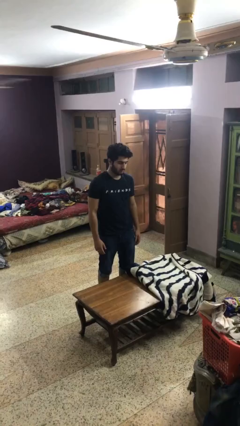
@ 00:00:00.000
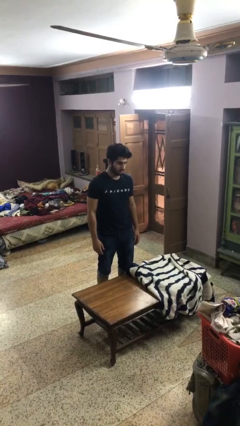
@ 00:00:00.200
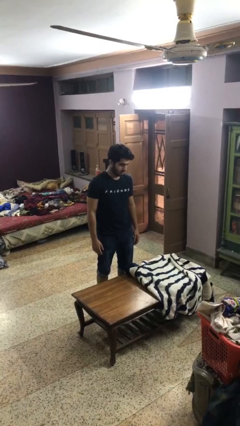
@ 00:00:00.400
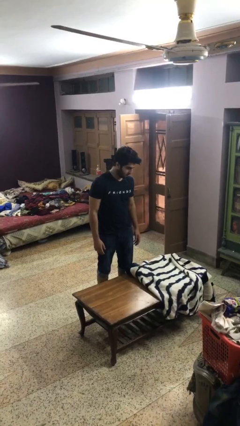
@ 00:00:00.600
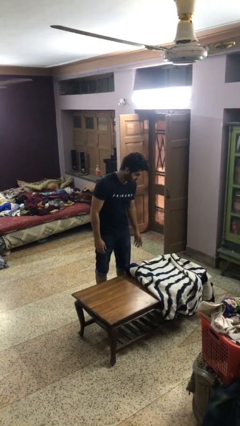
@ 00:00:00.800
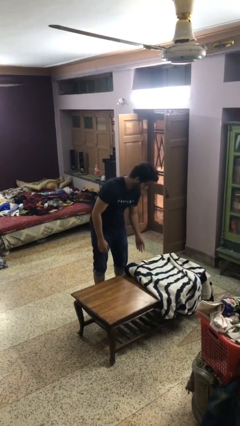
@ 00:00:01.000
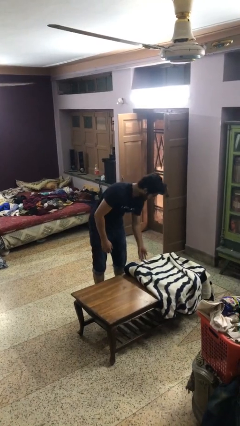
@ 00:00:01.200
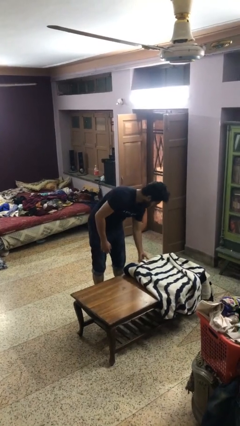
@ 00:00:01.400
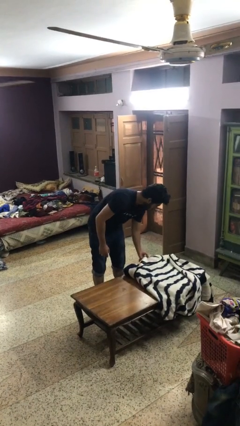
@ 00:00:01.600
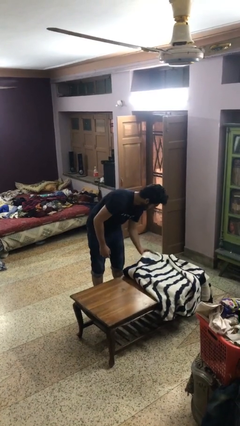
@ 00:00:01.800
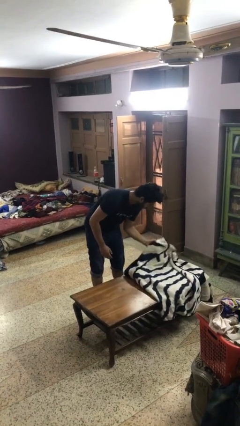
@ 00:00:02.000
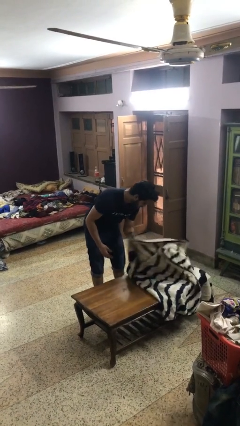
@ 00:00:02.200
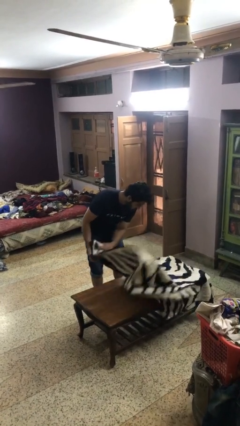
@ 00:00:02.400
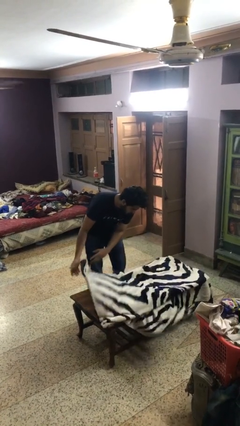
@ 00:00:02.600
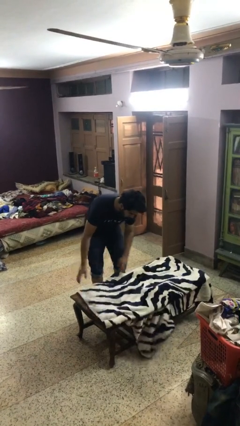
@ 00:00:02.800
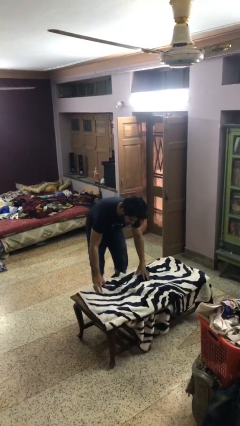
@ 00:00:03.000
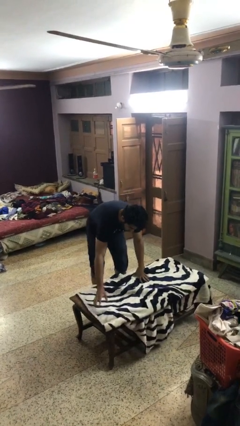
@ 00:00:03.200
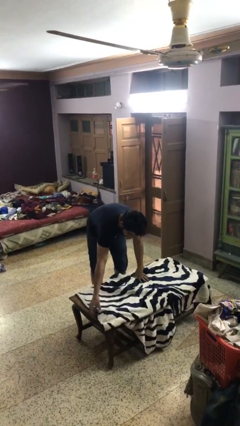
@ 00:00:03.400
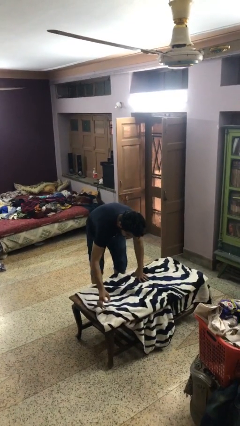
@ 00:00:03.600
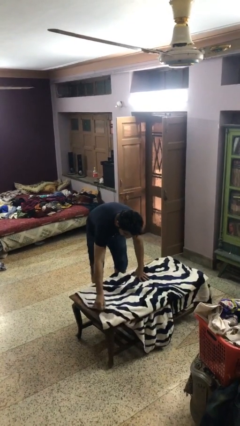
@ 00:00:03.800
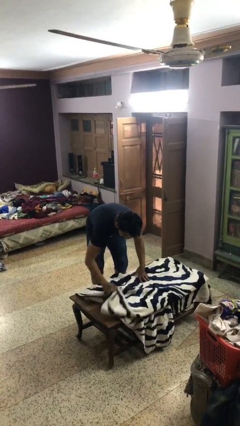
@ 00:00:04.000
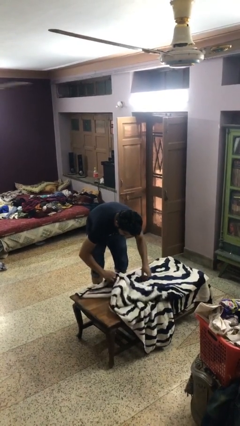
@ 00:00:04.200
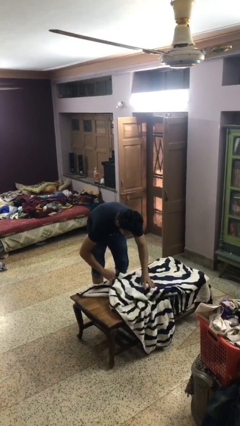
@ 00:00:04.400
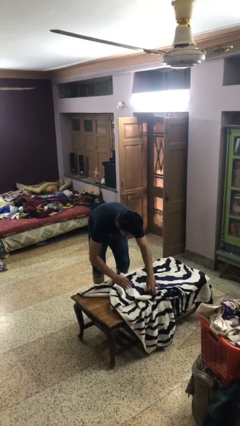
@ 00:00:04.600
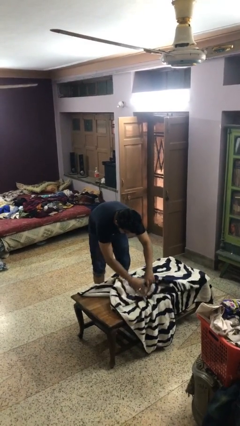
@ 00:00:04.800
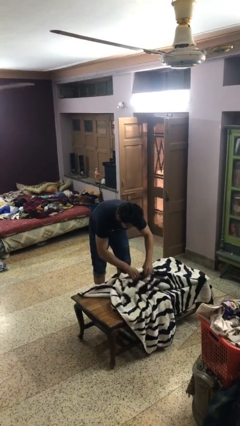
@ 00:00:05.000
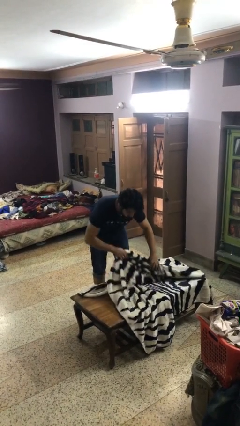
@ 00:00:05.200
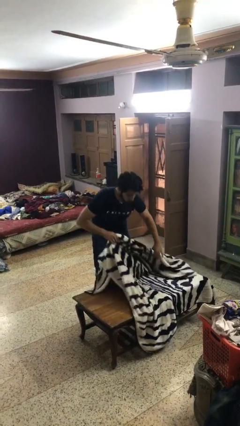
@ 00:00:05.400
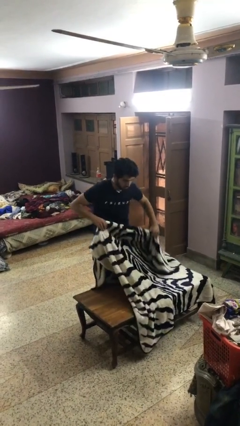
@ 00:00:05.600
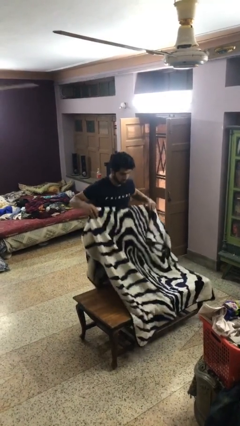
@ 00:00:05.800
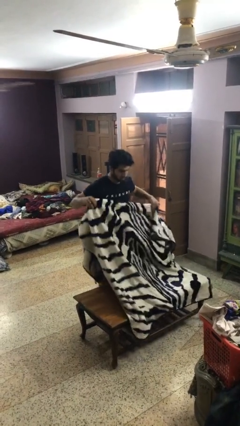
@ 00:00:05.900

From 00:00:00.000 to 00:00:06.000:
person unfolds blanket

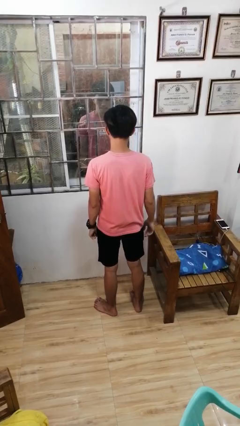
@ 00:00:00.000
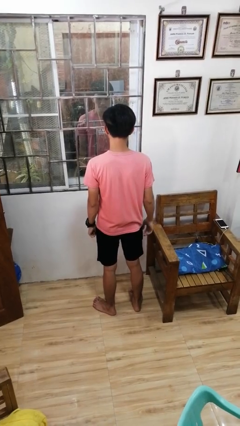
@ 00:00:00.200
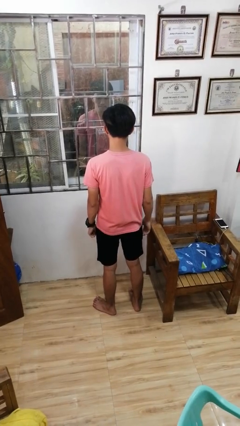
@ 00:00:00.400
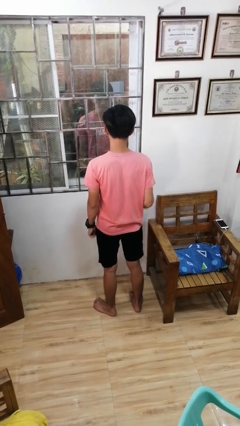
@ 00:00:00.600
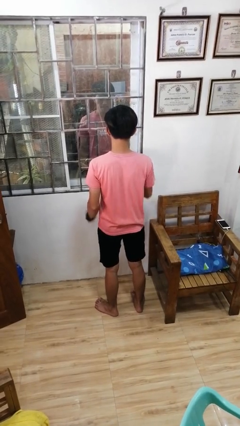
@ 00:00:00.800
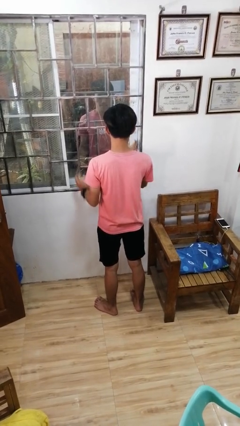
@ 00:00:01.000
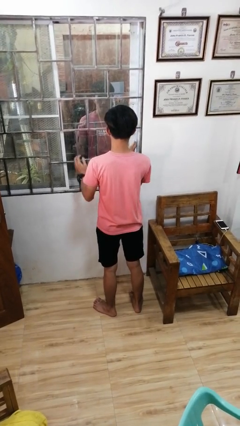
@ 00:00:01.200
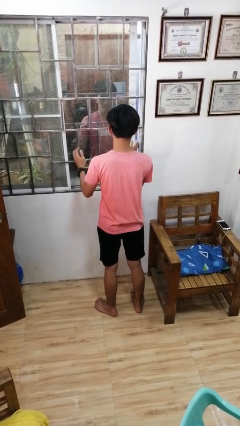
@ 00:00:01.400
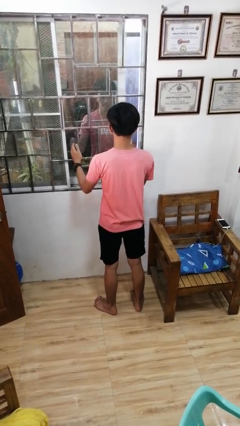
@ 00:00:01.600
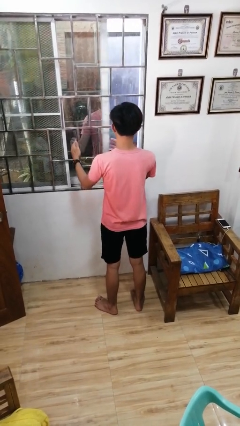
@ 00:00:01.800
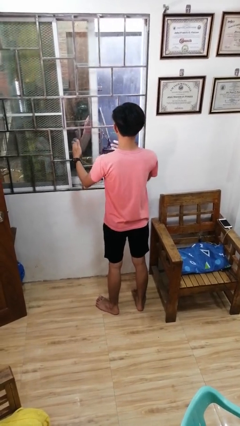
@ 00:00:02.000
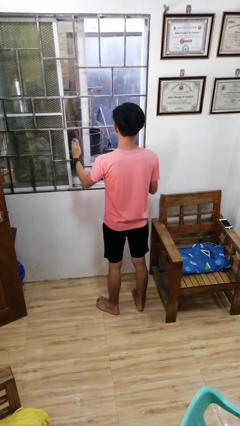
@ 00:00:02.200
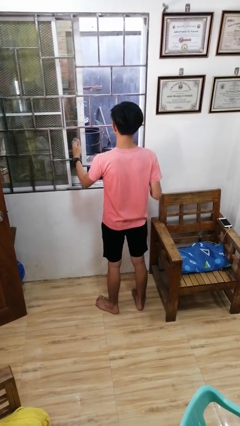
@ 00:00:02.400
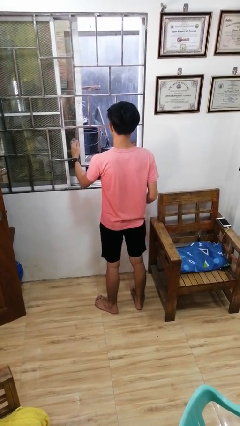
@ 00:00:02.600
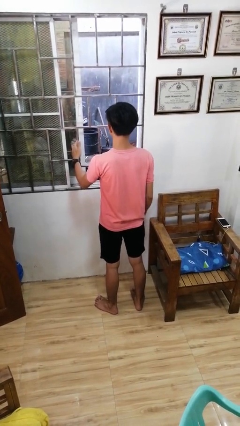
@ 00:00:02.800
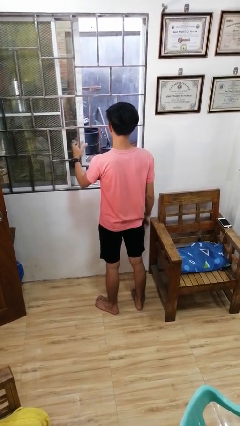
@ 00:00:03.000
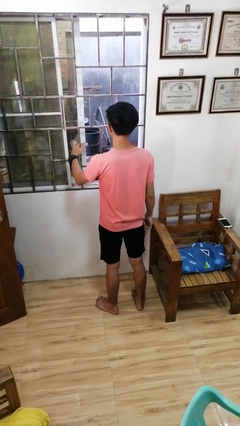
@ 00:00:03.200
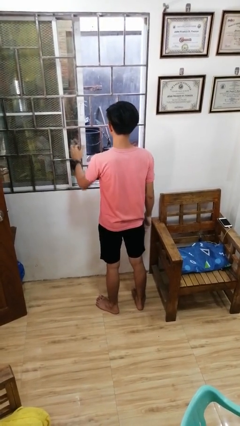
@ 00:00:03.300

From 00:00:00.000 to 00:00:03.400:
person opens home window

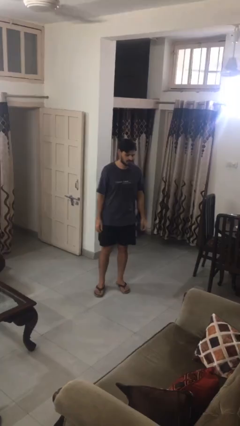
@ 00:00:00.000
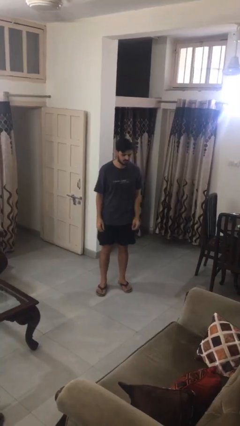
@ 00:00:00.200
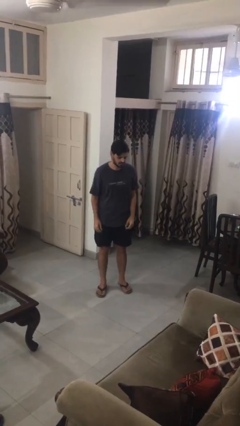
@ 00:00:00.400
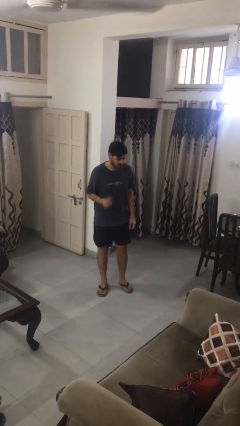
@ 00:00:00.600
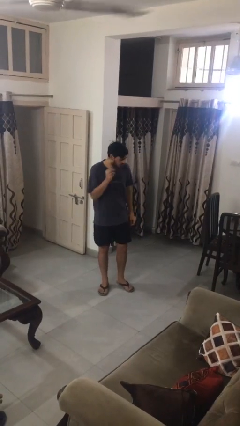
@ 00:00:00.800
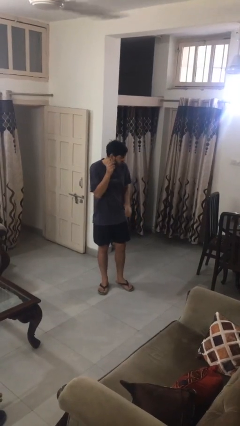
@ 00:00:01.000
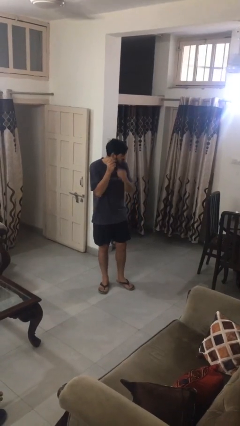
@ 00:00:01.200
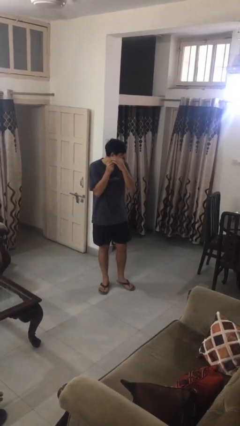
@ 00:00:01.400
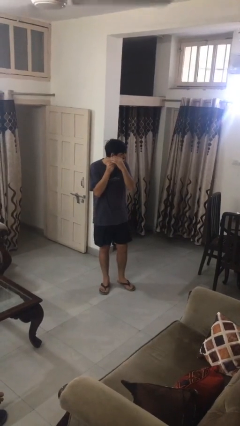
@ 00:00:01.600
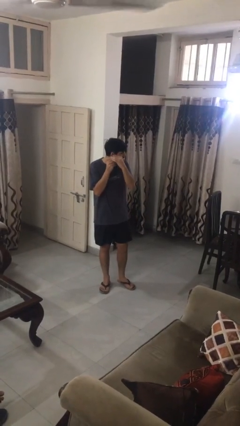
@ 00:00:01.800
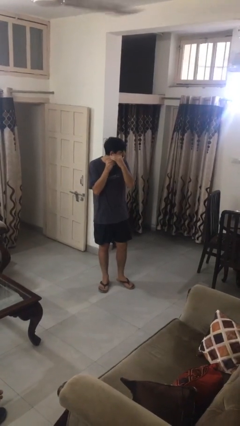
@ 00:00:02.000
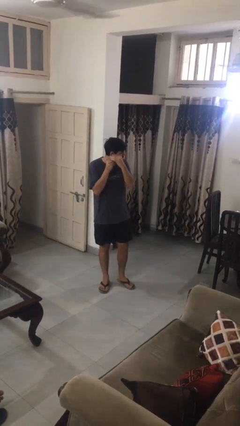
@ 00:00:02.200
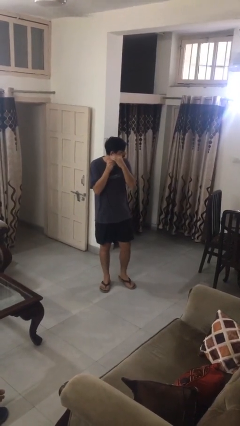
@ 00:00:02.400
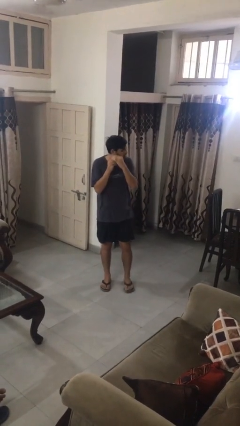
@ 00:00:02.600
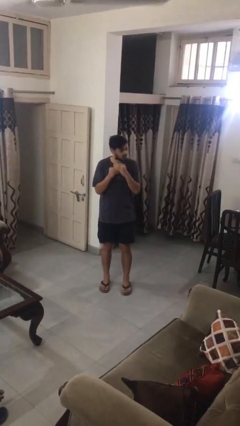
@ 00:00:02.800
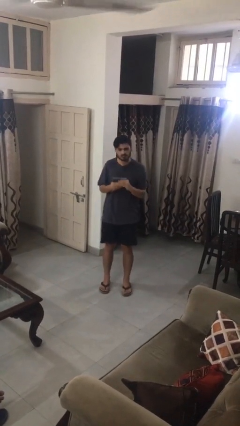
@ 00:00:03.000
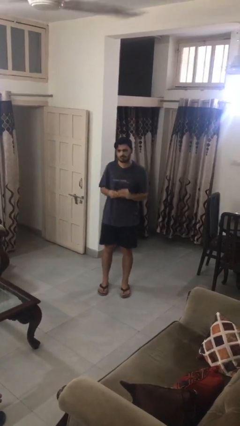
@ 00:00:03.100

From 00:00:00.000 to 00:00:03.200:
person takes off earrings

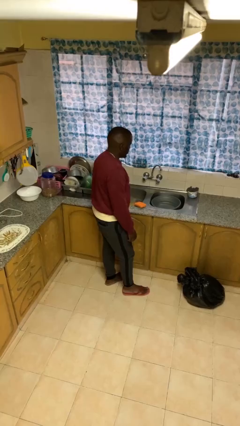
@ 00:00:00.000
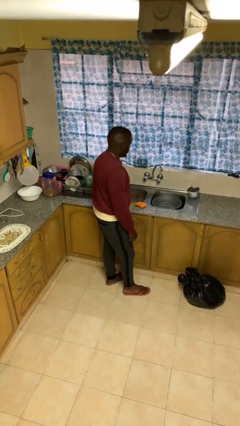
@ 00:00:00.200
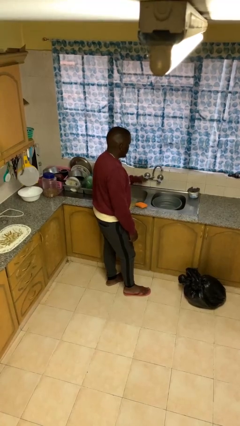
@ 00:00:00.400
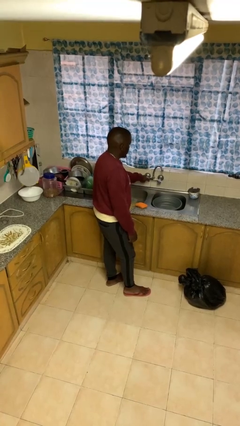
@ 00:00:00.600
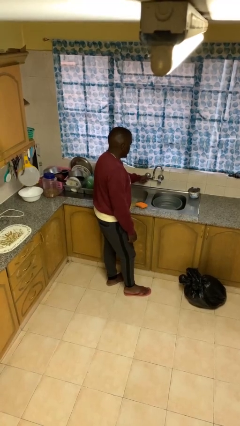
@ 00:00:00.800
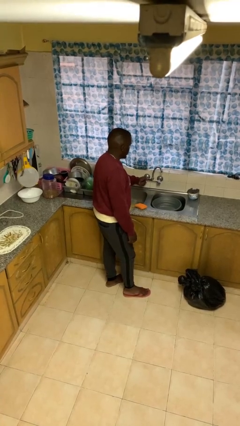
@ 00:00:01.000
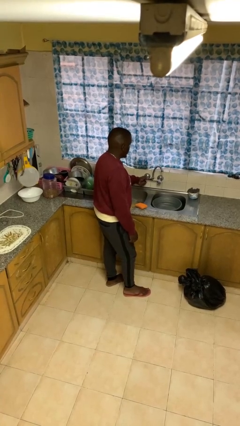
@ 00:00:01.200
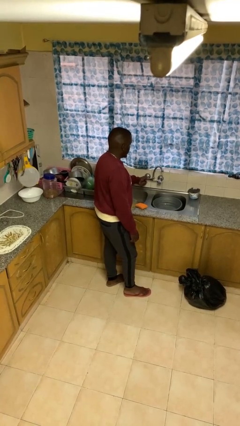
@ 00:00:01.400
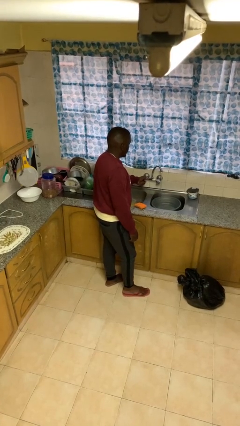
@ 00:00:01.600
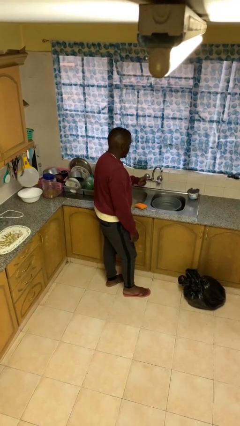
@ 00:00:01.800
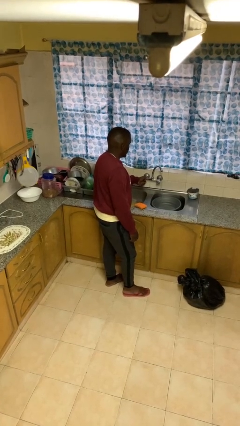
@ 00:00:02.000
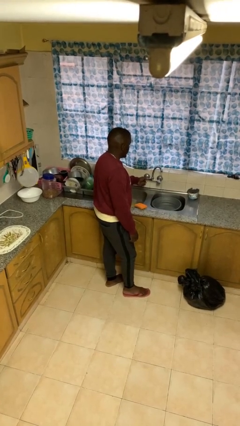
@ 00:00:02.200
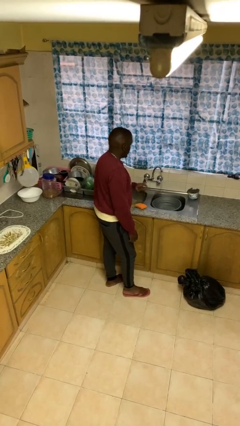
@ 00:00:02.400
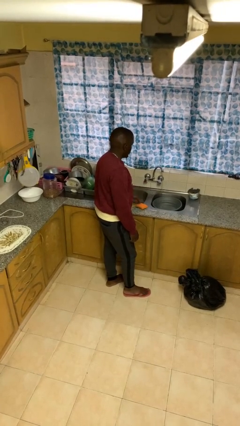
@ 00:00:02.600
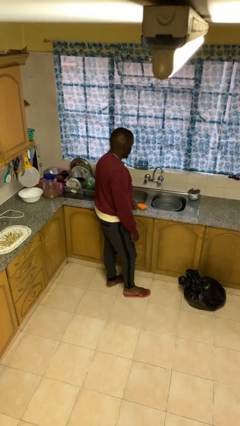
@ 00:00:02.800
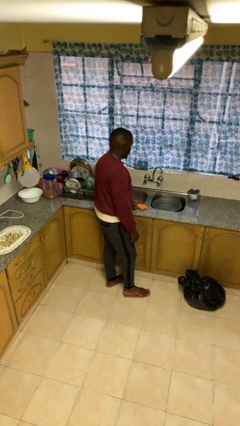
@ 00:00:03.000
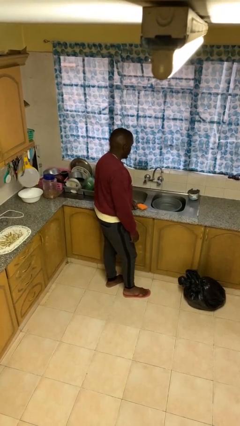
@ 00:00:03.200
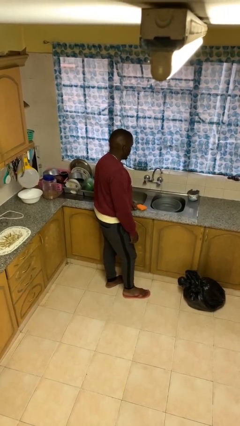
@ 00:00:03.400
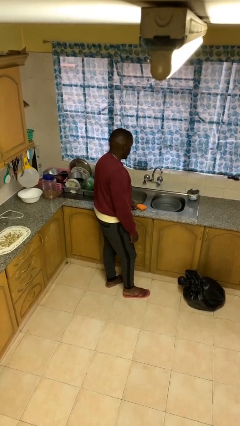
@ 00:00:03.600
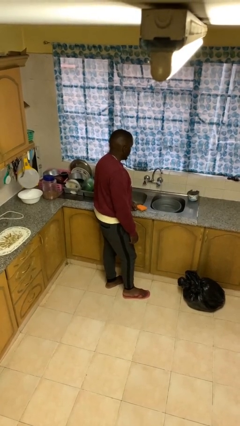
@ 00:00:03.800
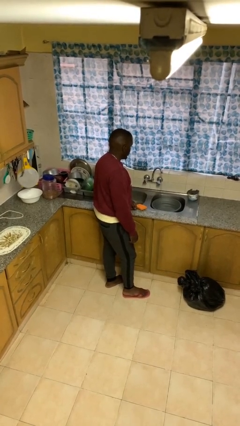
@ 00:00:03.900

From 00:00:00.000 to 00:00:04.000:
person turns on faucet

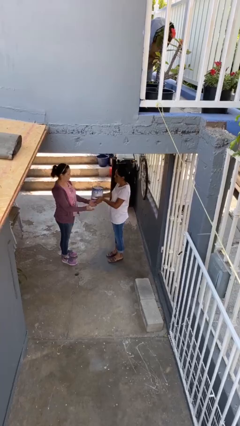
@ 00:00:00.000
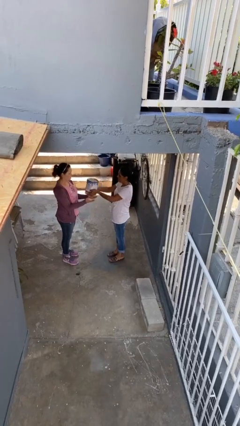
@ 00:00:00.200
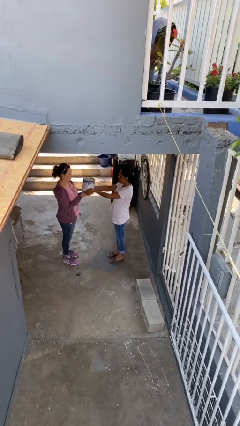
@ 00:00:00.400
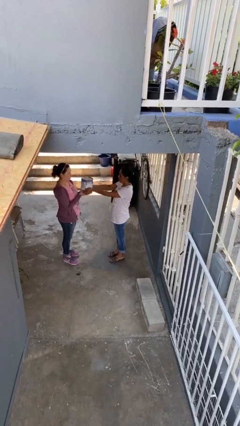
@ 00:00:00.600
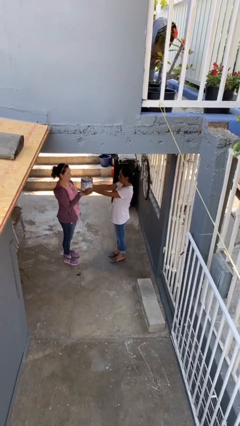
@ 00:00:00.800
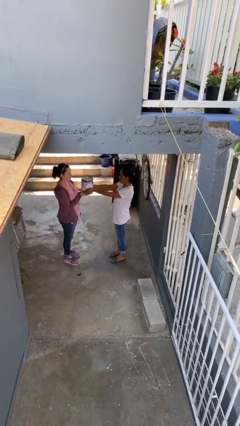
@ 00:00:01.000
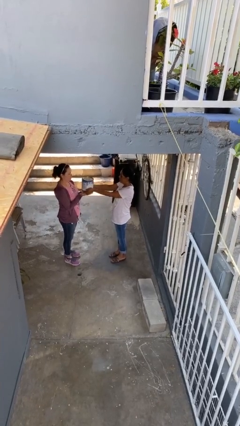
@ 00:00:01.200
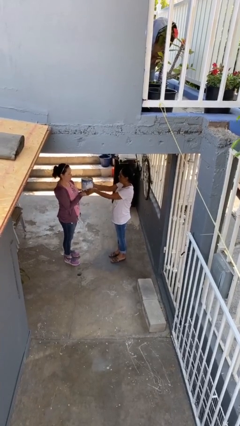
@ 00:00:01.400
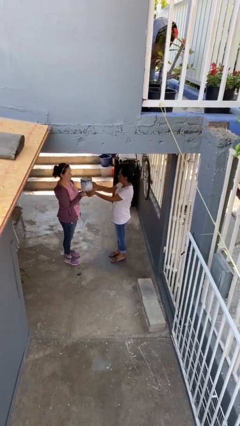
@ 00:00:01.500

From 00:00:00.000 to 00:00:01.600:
person transfers object to person
